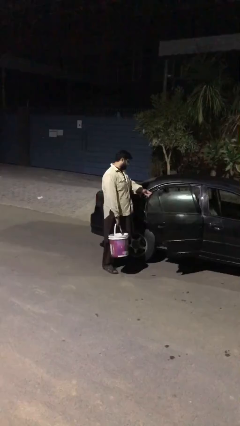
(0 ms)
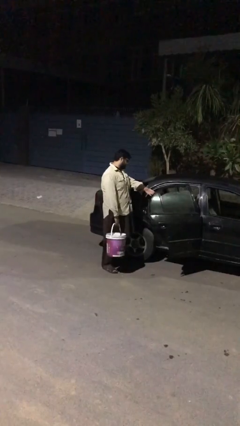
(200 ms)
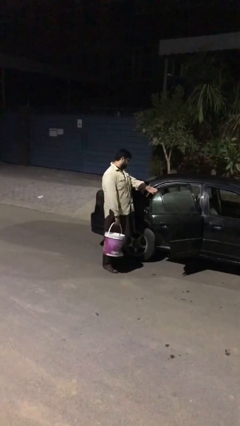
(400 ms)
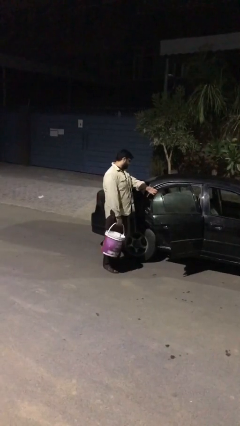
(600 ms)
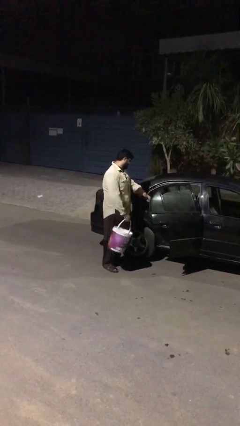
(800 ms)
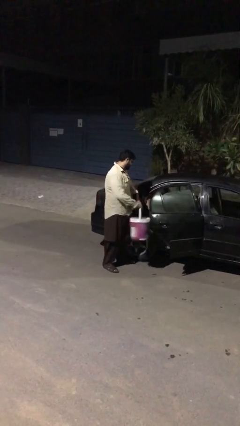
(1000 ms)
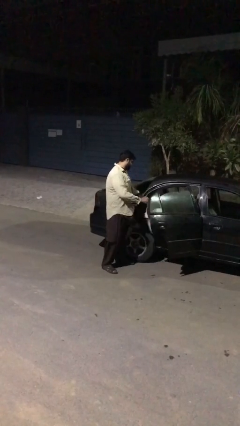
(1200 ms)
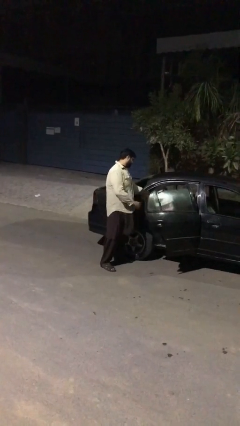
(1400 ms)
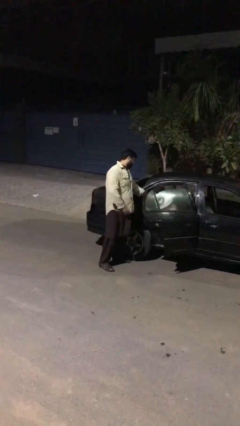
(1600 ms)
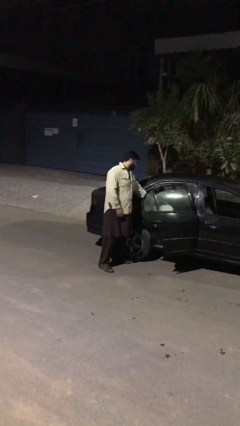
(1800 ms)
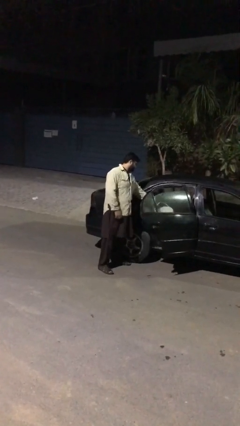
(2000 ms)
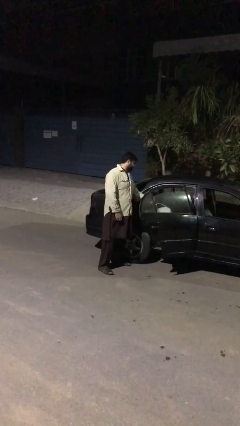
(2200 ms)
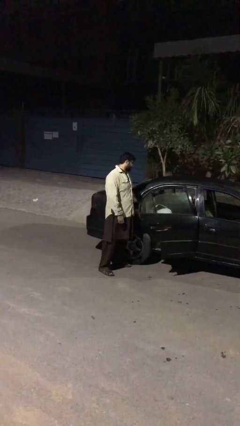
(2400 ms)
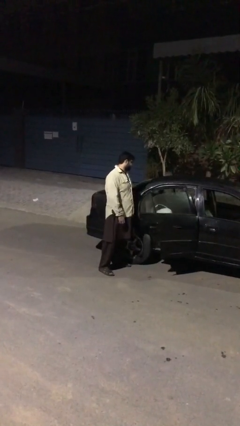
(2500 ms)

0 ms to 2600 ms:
person loads car

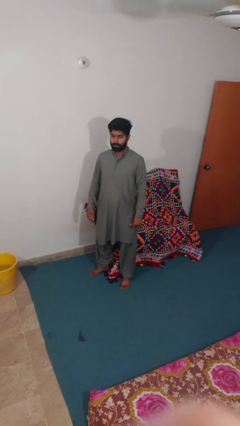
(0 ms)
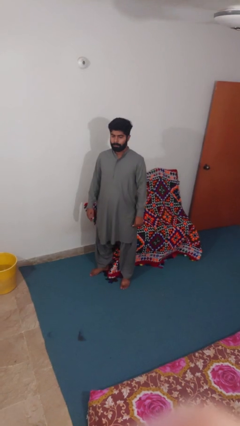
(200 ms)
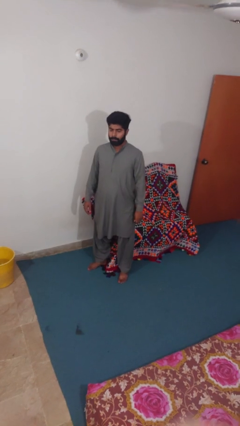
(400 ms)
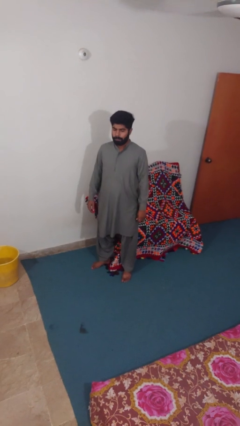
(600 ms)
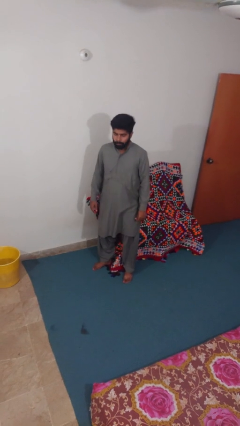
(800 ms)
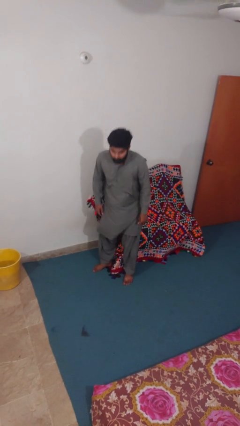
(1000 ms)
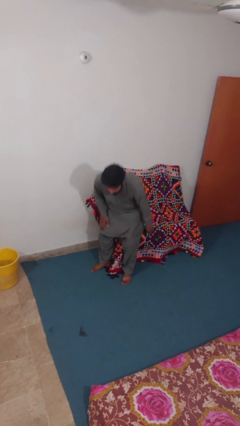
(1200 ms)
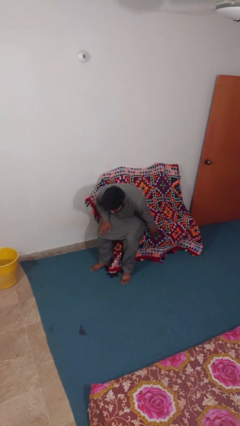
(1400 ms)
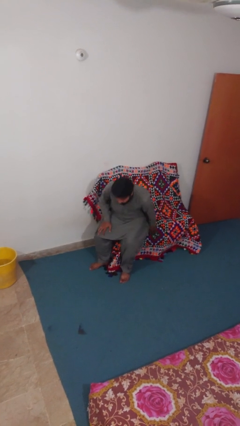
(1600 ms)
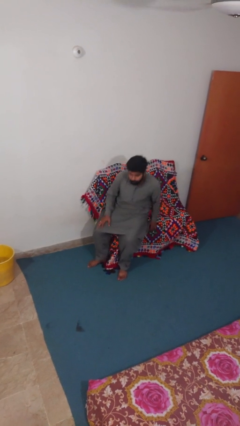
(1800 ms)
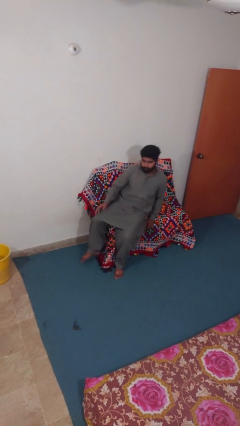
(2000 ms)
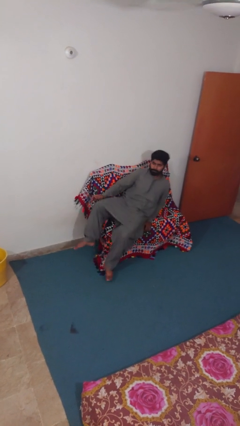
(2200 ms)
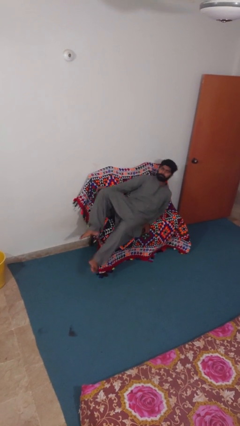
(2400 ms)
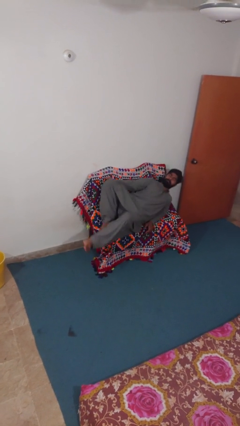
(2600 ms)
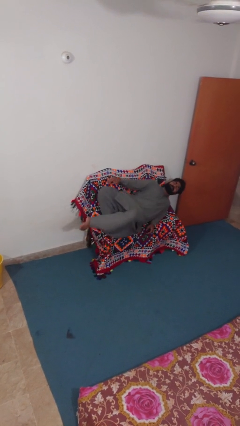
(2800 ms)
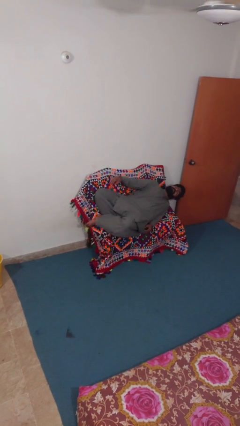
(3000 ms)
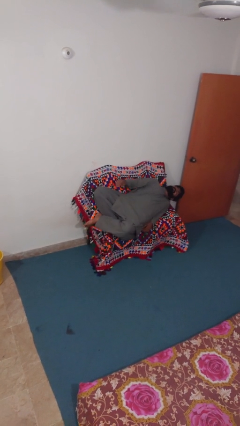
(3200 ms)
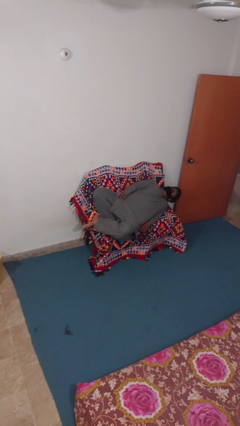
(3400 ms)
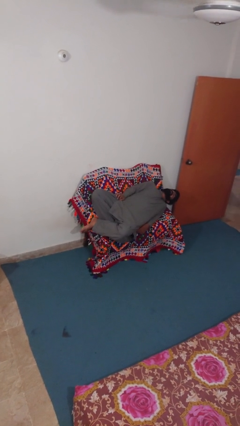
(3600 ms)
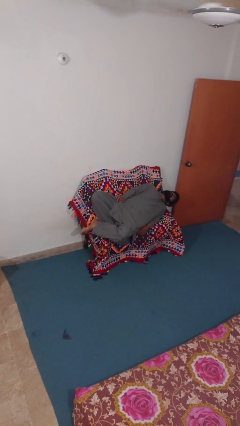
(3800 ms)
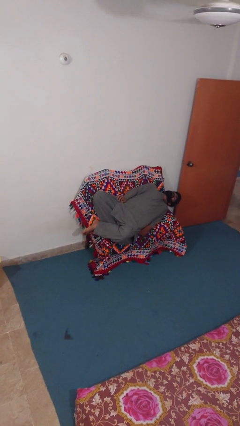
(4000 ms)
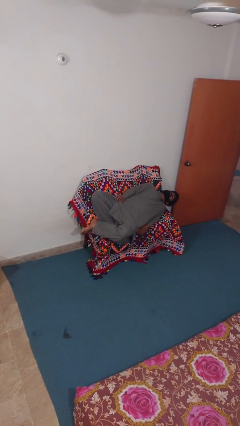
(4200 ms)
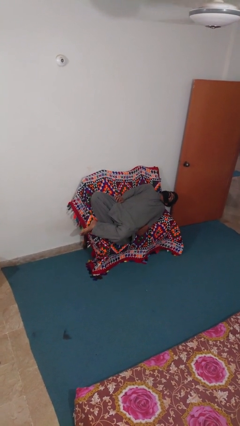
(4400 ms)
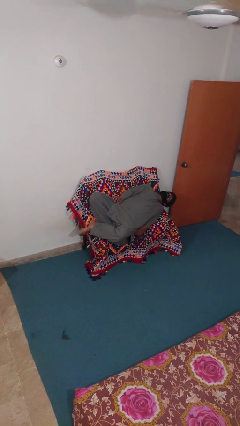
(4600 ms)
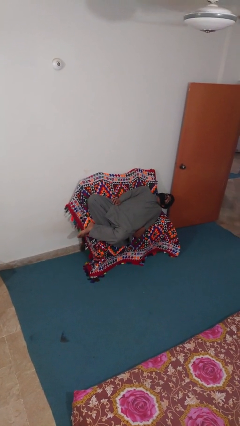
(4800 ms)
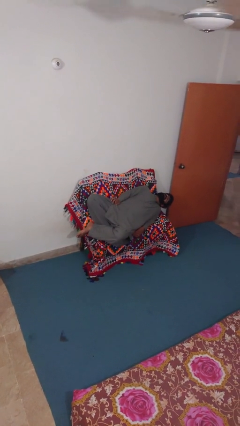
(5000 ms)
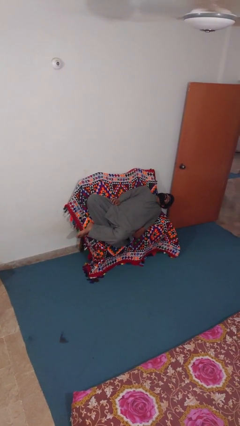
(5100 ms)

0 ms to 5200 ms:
person lies down on couch

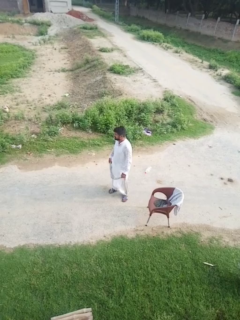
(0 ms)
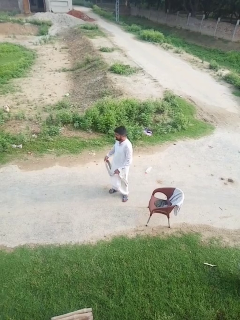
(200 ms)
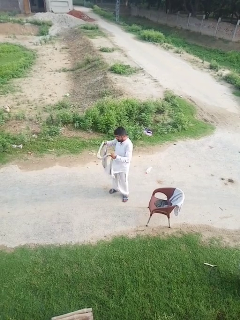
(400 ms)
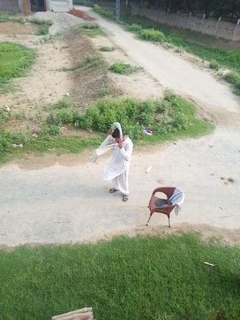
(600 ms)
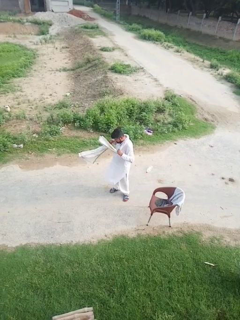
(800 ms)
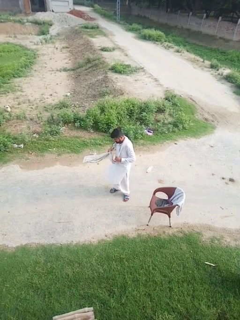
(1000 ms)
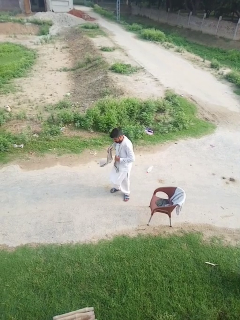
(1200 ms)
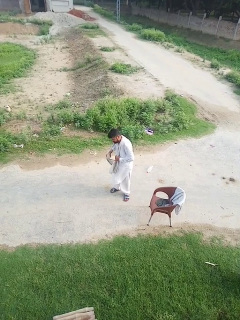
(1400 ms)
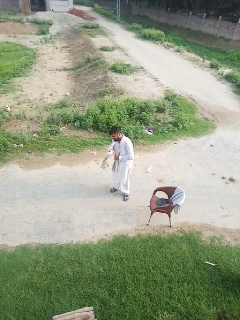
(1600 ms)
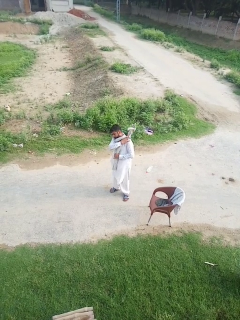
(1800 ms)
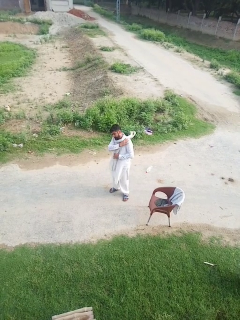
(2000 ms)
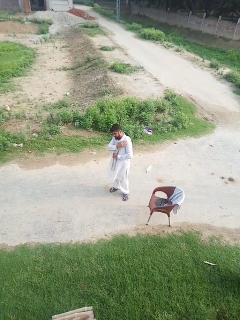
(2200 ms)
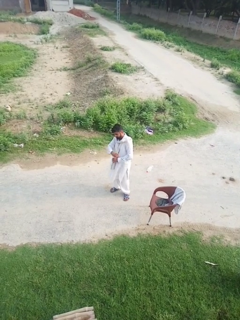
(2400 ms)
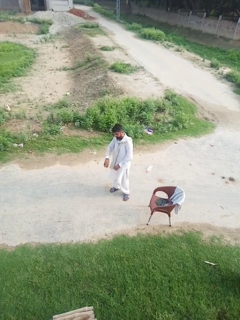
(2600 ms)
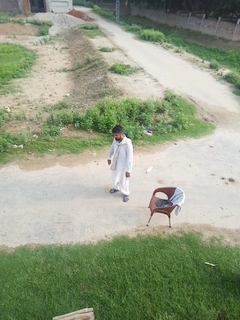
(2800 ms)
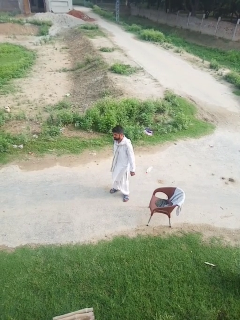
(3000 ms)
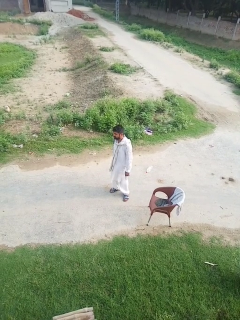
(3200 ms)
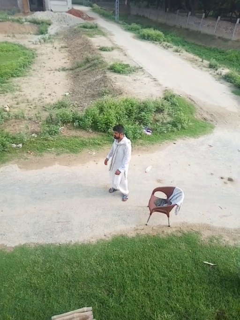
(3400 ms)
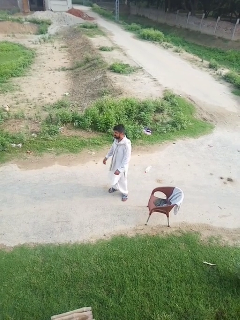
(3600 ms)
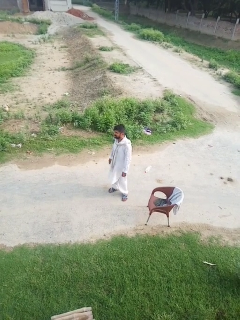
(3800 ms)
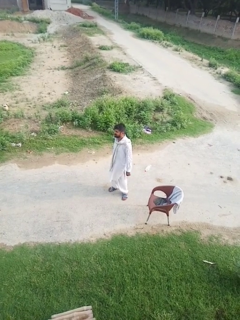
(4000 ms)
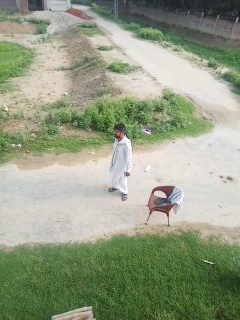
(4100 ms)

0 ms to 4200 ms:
person puts on scarf

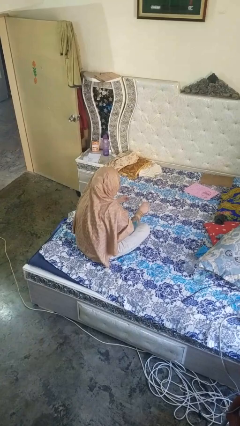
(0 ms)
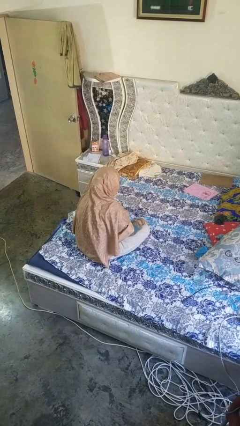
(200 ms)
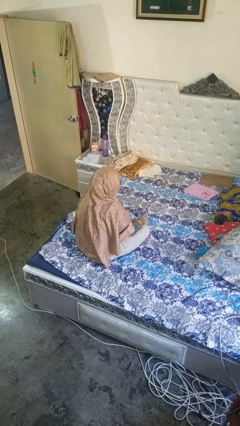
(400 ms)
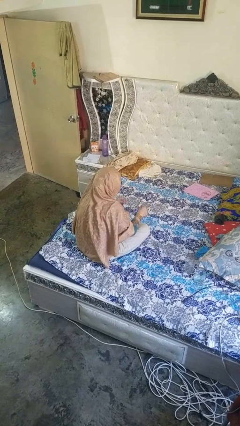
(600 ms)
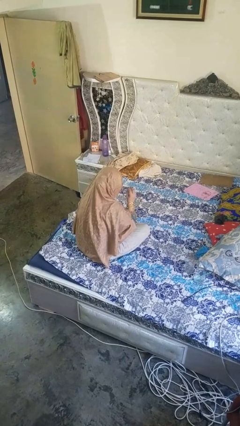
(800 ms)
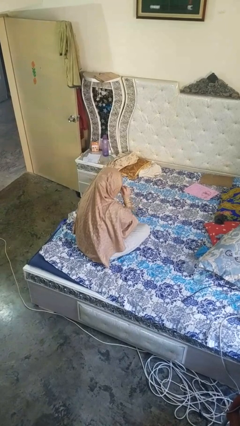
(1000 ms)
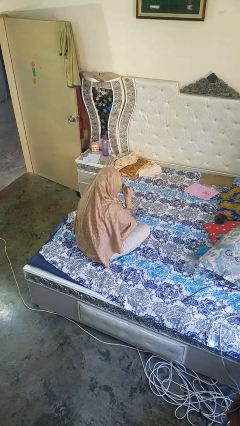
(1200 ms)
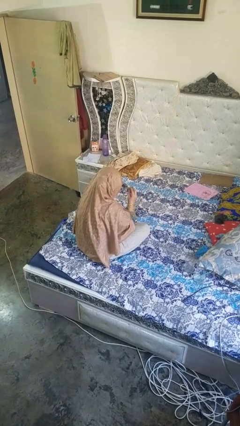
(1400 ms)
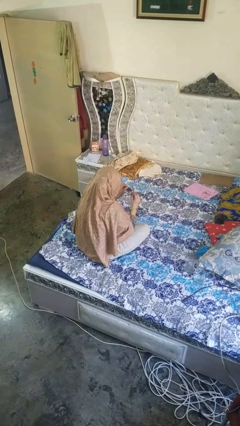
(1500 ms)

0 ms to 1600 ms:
person takes off glasses

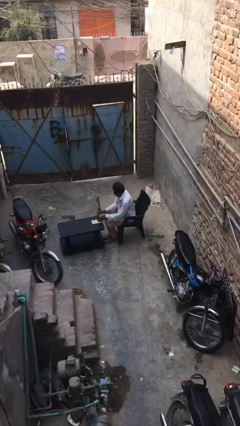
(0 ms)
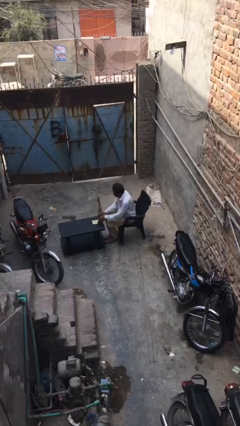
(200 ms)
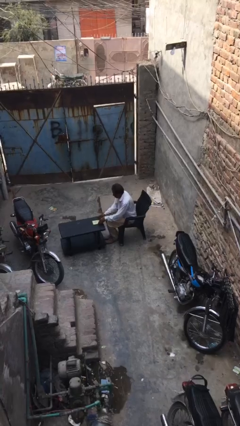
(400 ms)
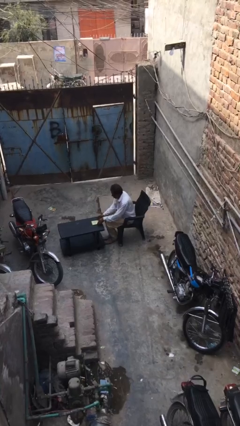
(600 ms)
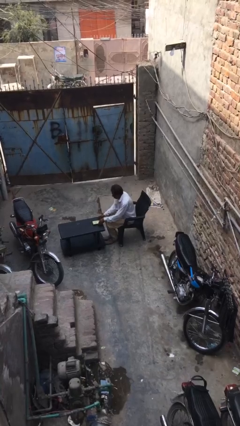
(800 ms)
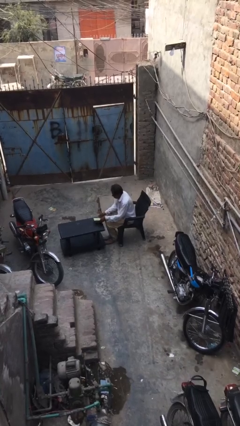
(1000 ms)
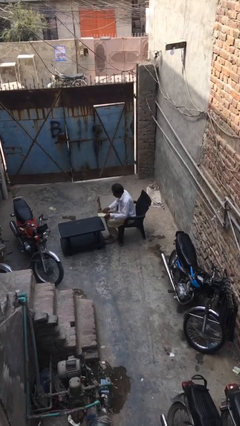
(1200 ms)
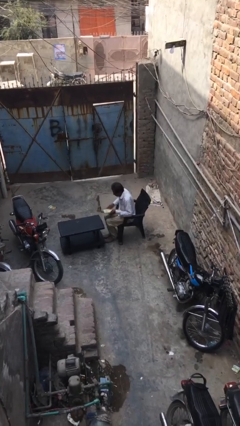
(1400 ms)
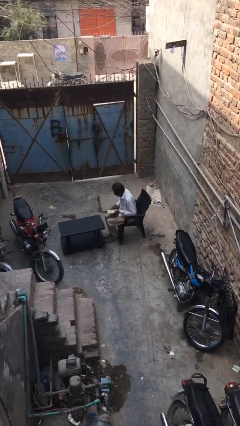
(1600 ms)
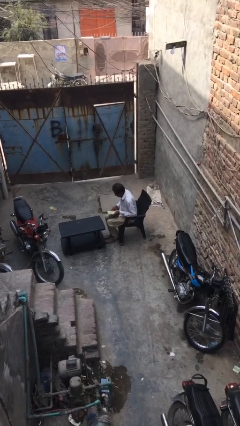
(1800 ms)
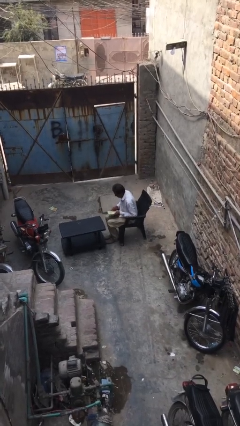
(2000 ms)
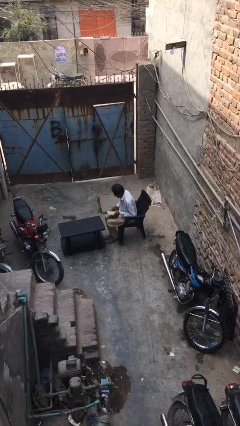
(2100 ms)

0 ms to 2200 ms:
person picks up object from table

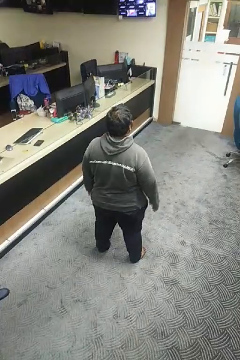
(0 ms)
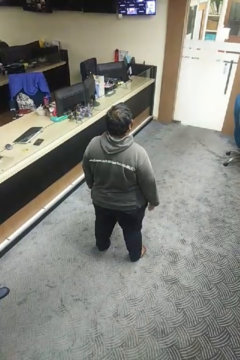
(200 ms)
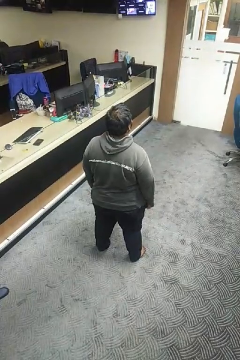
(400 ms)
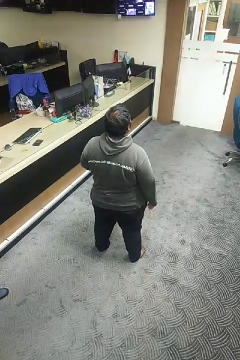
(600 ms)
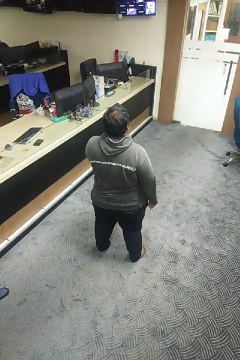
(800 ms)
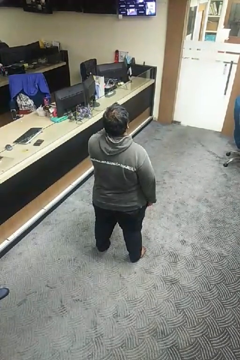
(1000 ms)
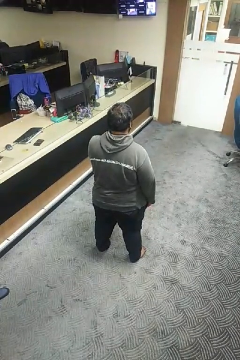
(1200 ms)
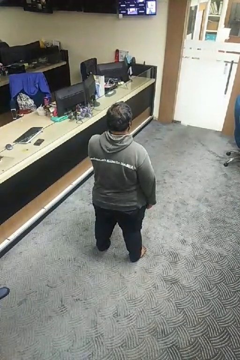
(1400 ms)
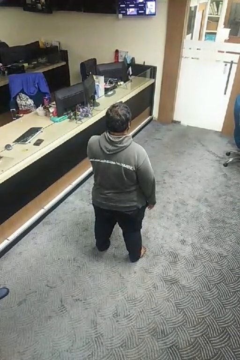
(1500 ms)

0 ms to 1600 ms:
person sneezes into hand

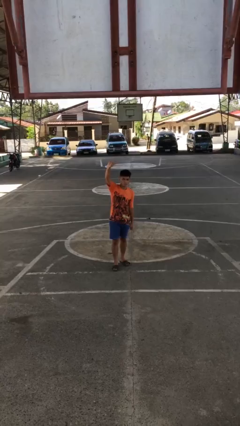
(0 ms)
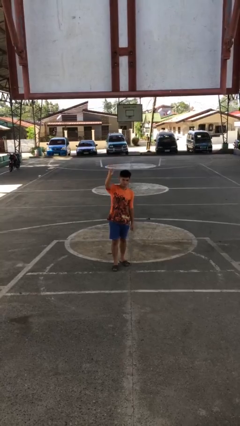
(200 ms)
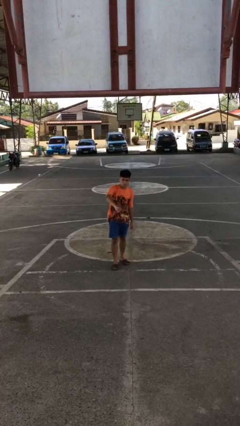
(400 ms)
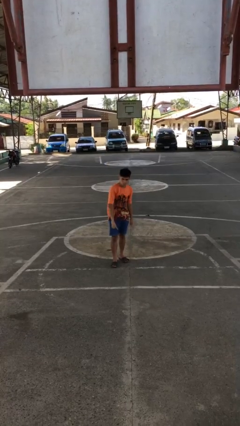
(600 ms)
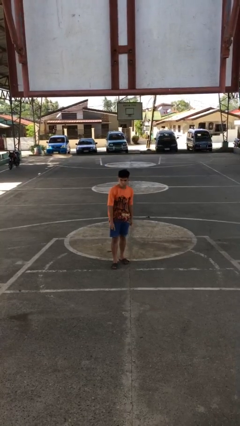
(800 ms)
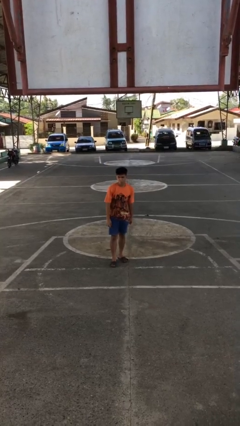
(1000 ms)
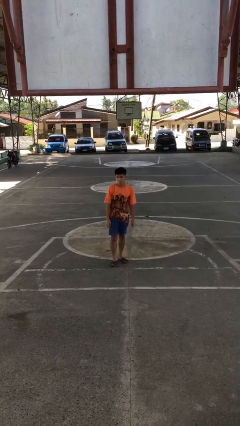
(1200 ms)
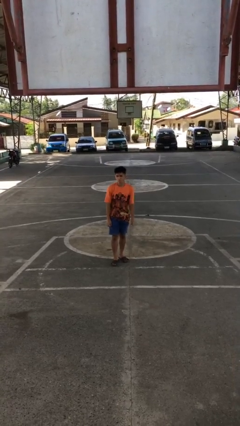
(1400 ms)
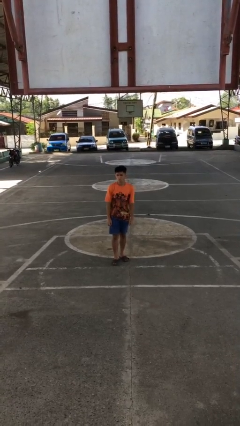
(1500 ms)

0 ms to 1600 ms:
person gestures swipe down
